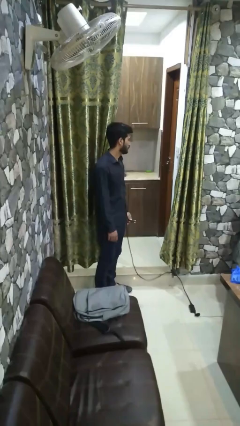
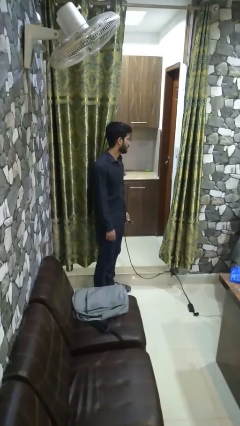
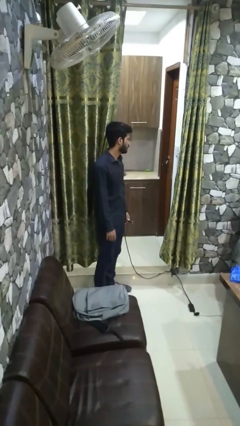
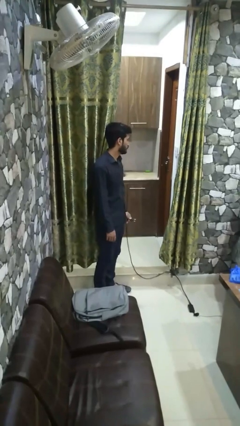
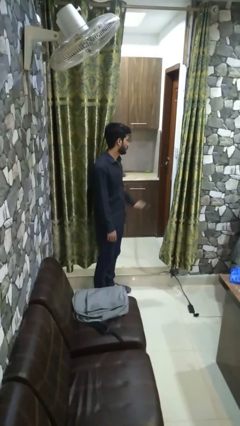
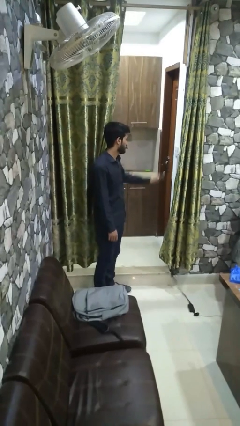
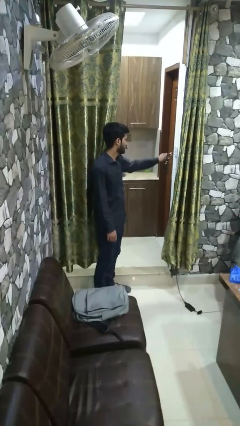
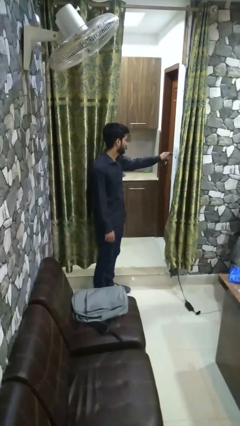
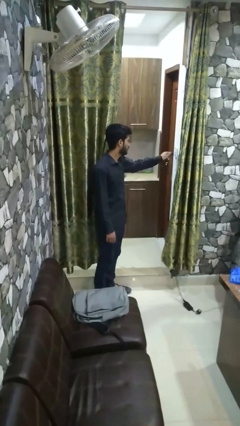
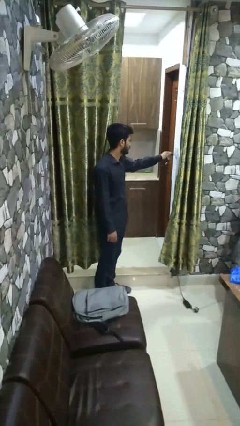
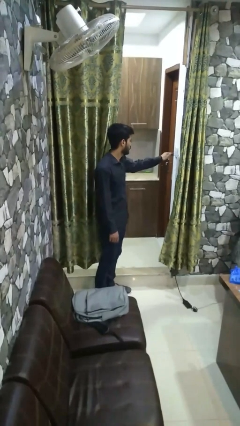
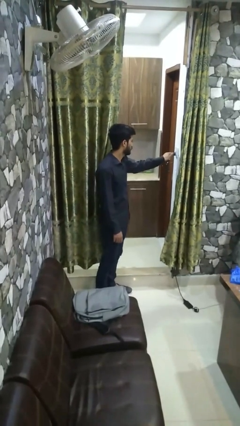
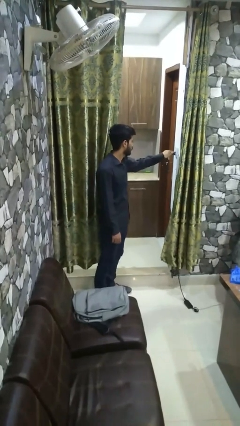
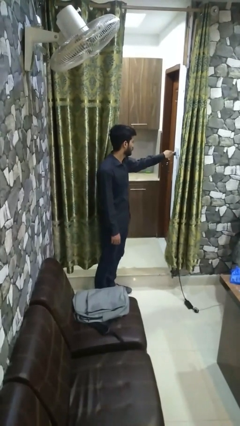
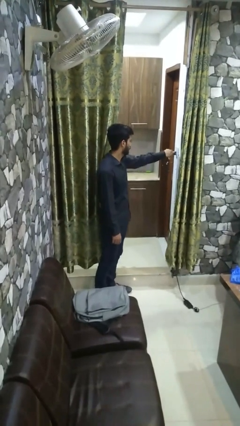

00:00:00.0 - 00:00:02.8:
person plugs into electrical socket

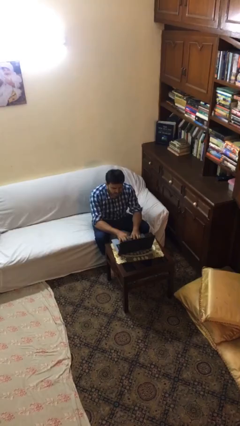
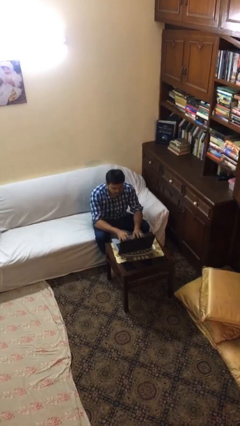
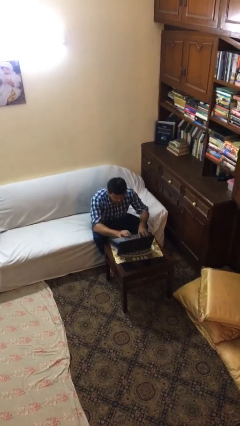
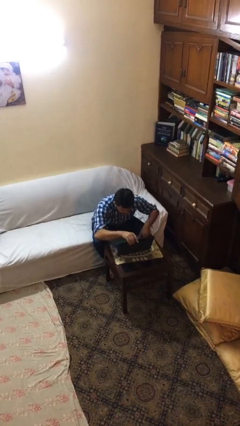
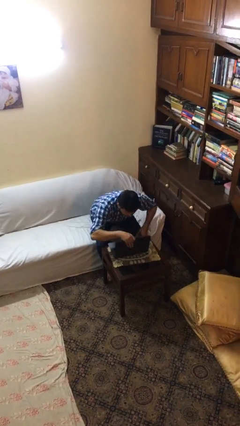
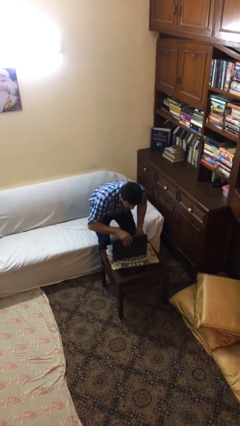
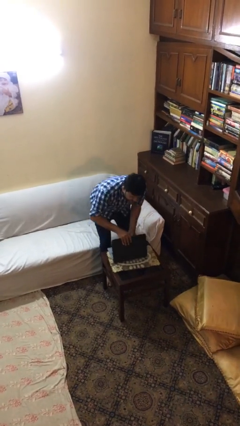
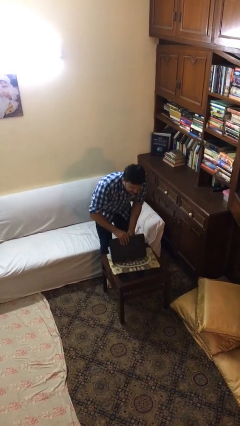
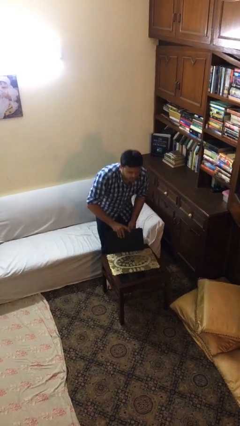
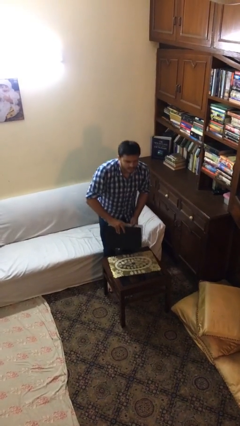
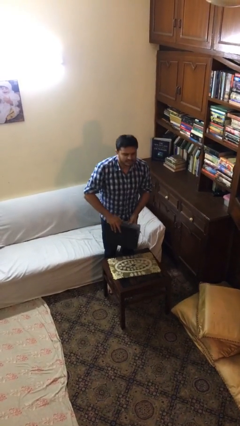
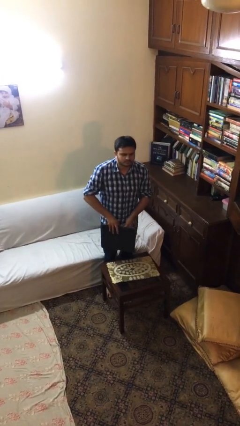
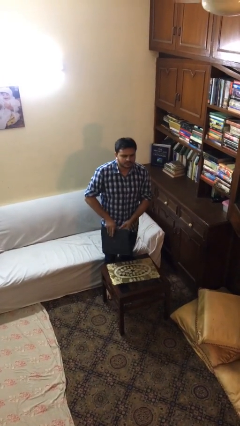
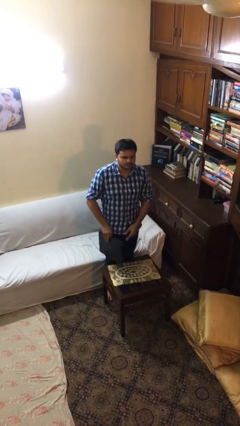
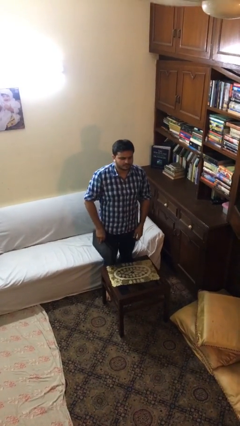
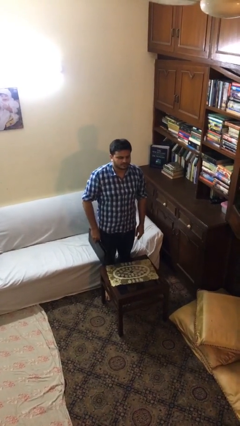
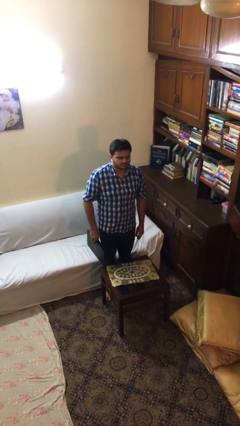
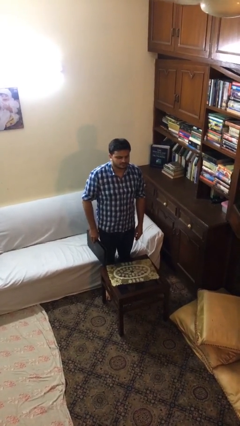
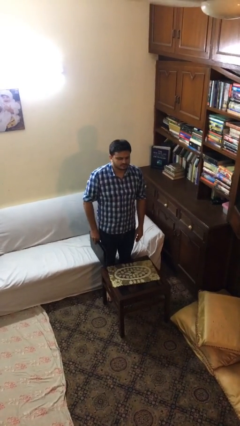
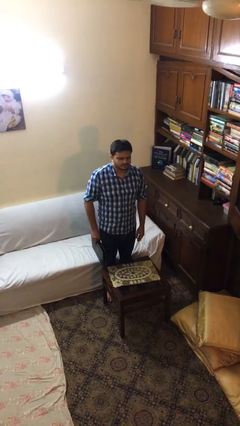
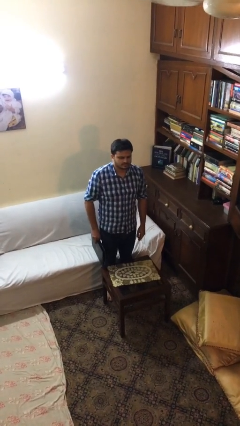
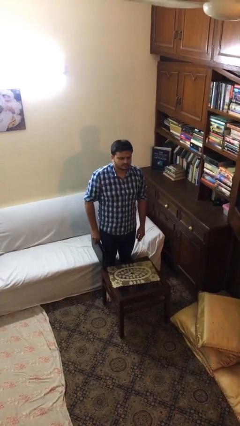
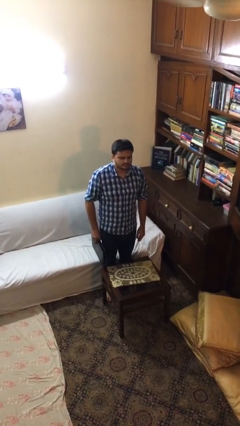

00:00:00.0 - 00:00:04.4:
person stands up

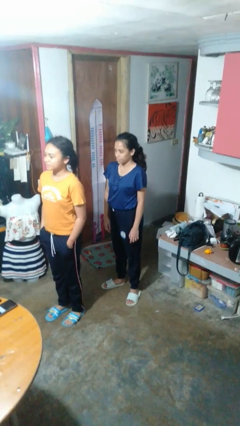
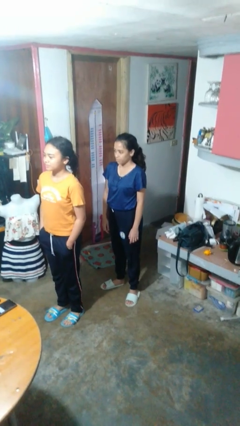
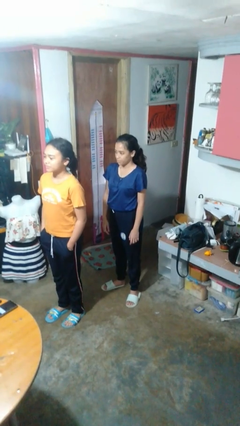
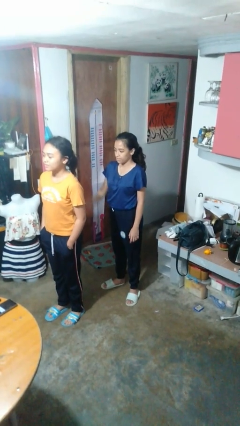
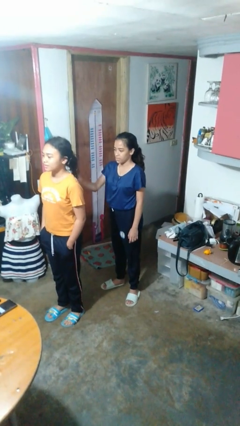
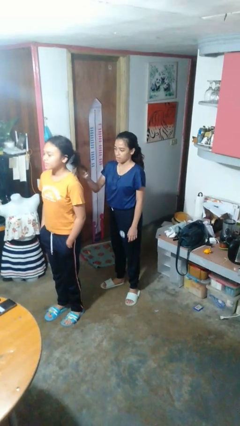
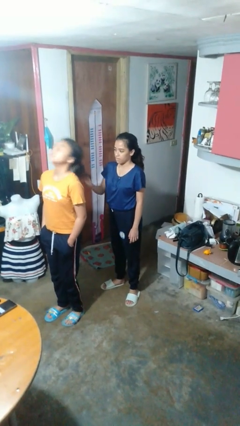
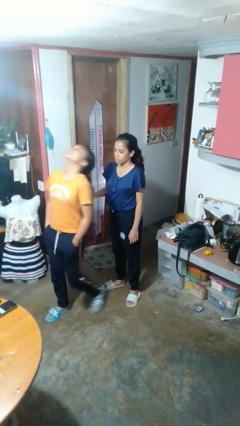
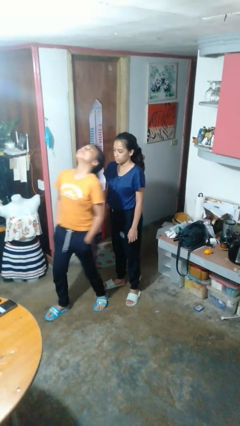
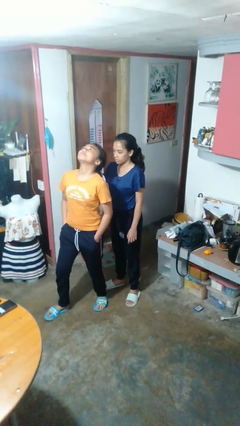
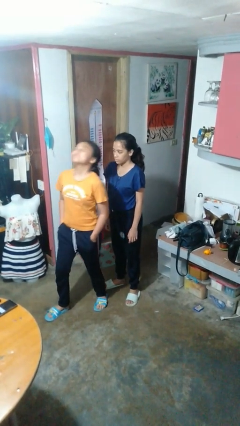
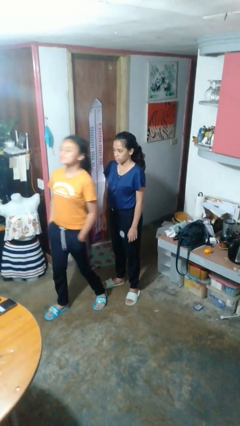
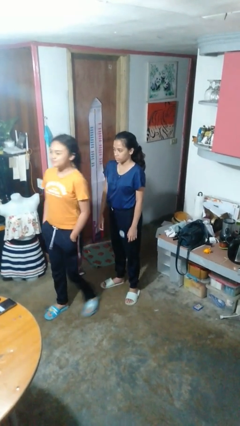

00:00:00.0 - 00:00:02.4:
person grabs person by hair

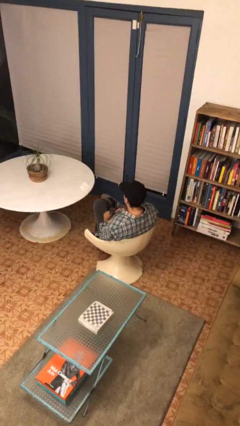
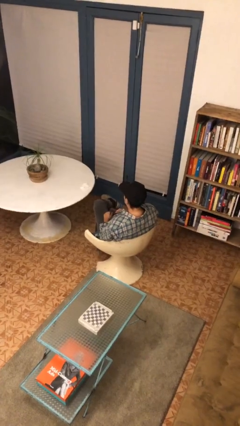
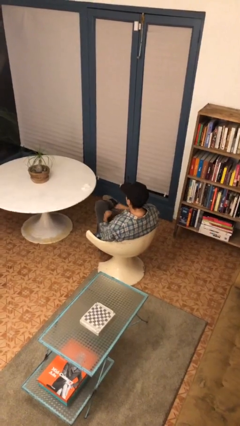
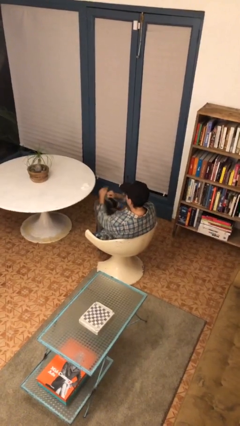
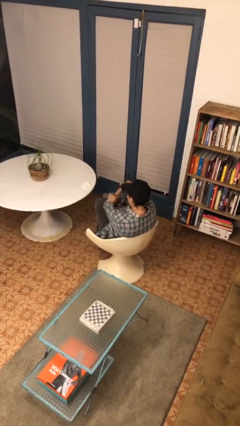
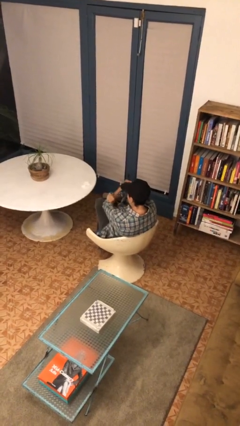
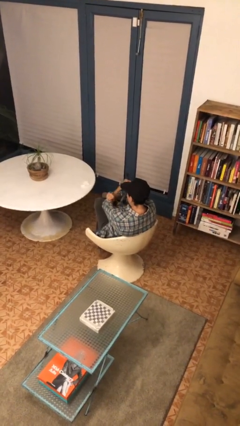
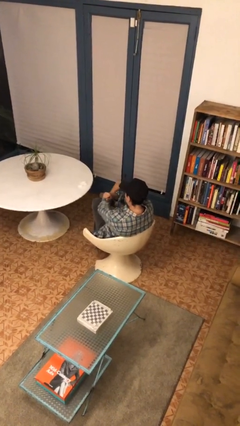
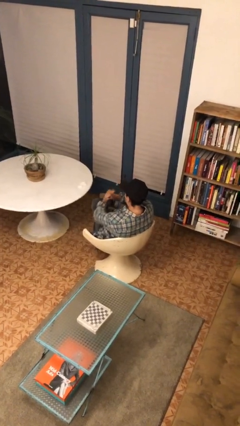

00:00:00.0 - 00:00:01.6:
person gestures arms x

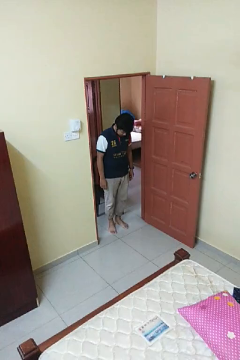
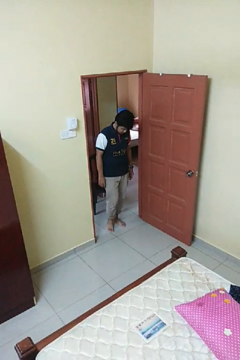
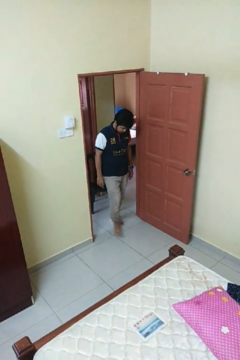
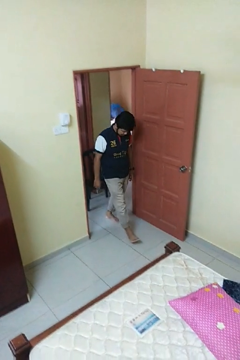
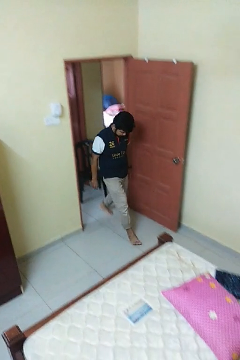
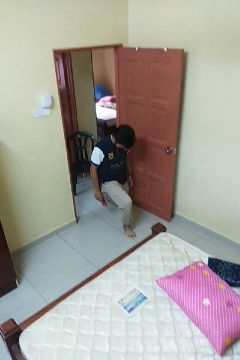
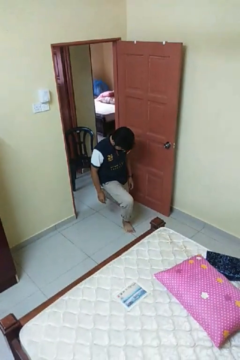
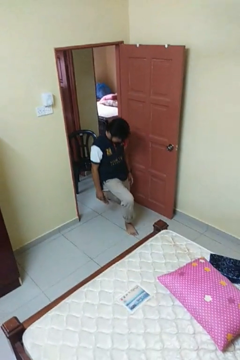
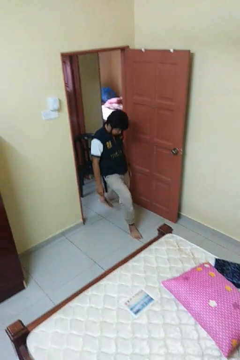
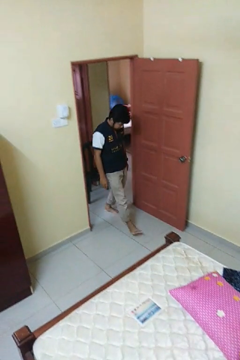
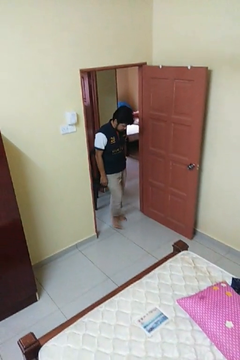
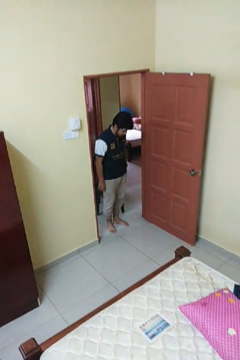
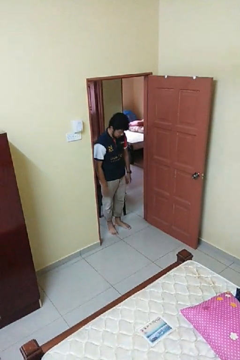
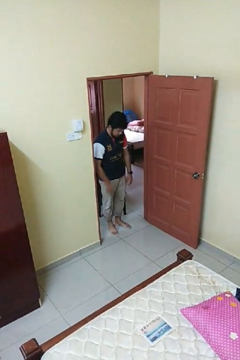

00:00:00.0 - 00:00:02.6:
person exercises with lunges

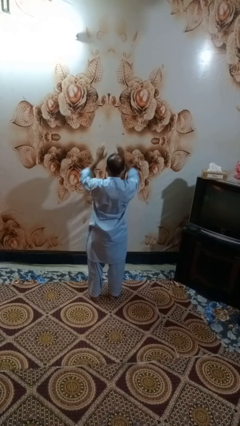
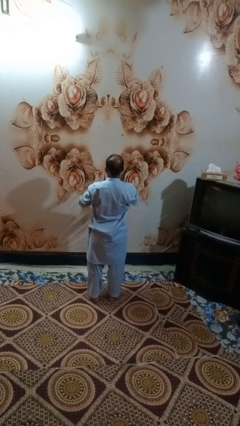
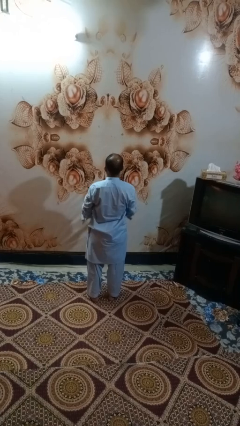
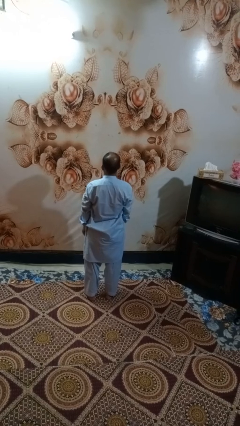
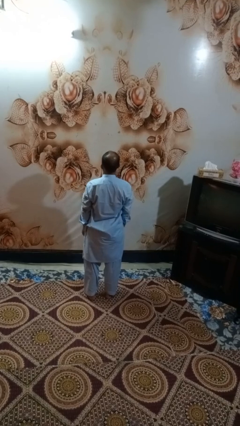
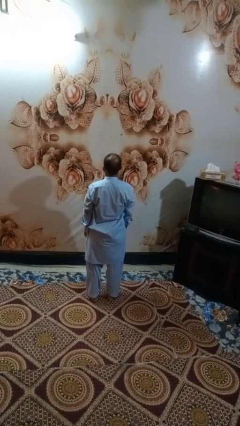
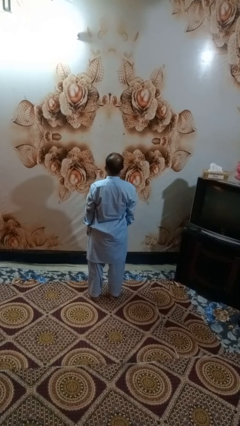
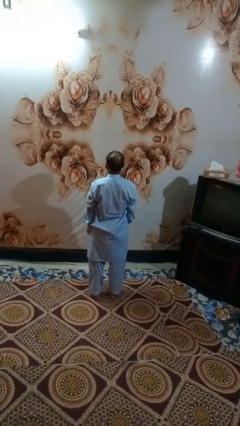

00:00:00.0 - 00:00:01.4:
person gestures swipe down

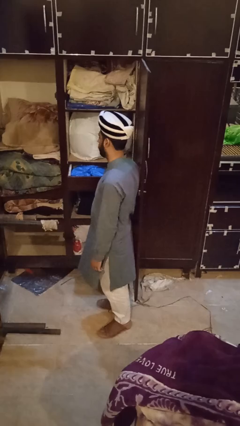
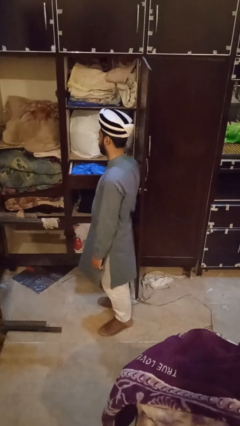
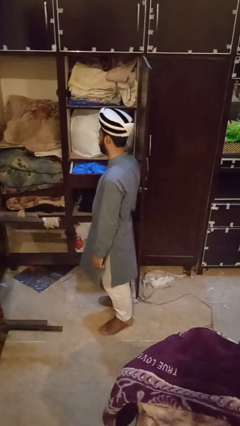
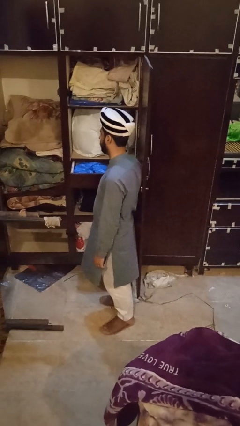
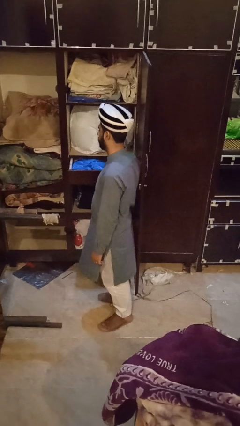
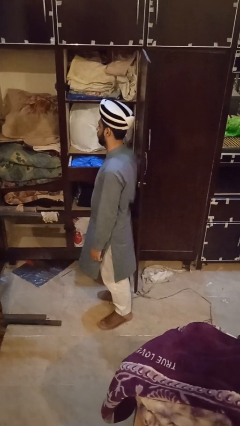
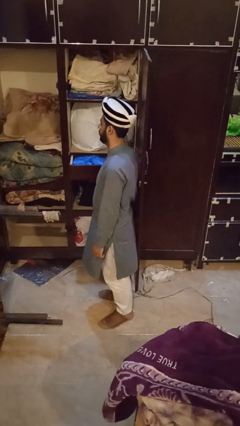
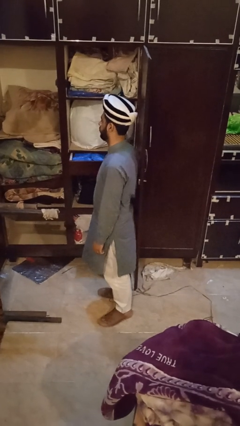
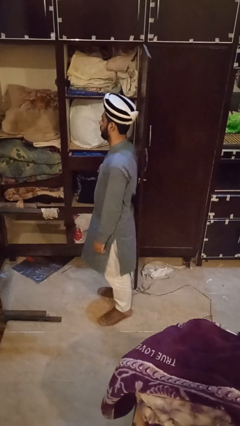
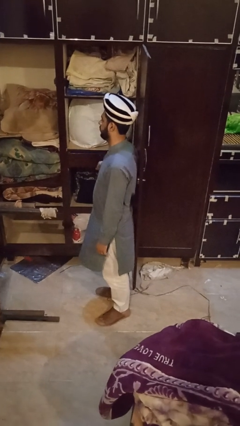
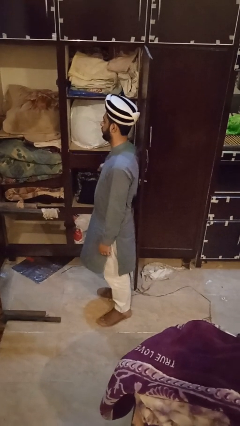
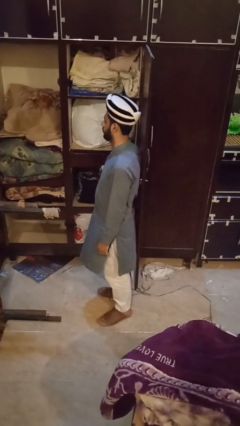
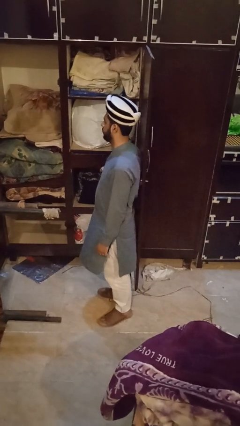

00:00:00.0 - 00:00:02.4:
person closes dresser drawer

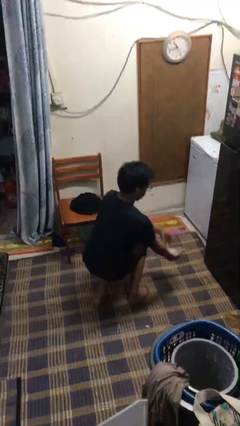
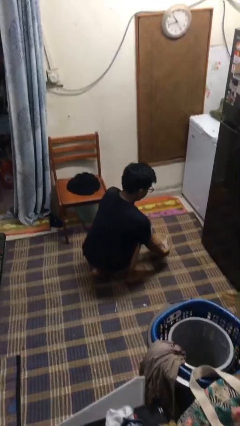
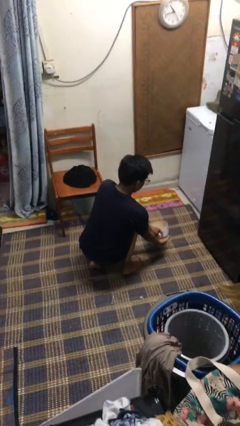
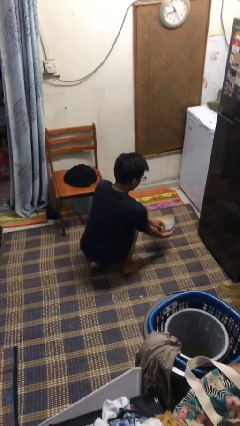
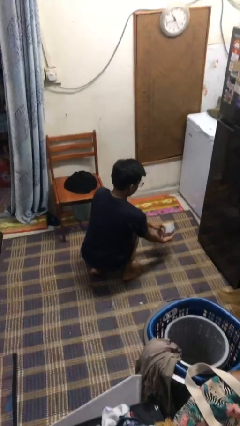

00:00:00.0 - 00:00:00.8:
person catches dropped object
